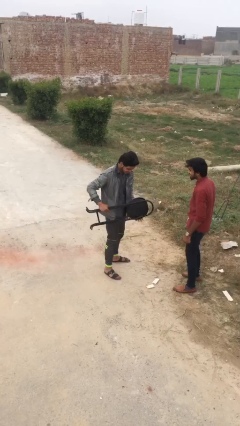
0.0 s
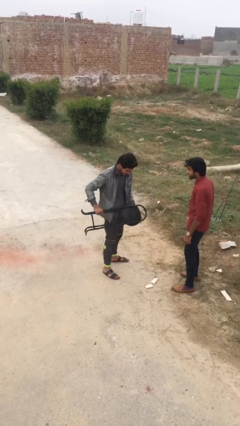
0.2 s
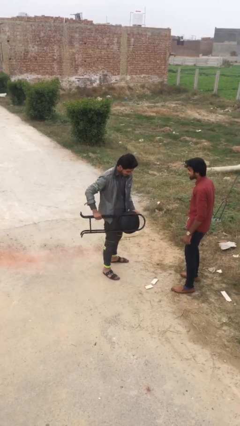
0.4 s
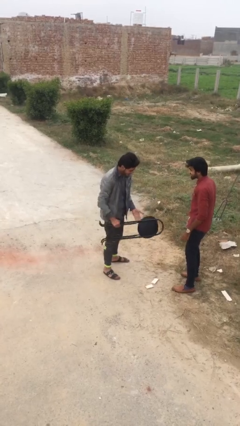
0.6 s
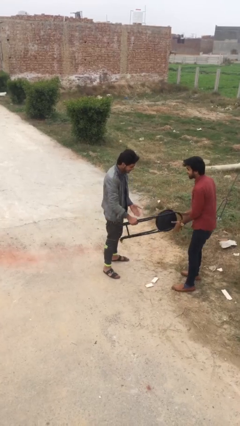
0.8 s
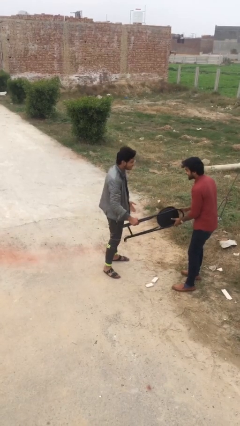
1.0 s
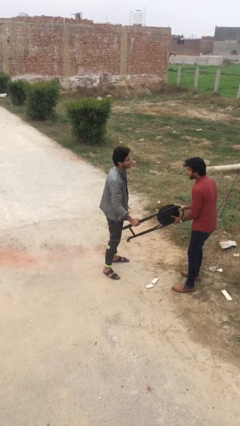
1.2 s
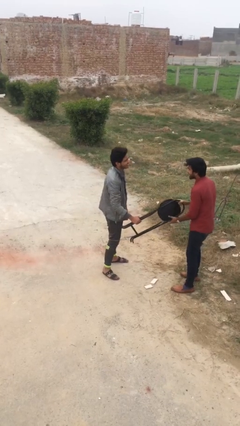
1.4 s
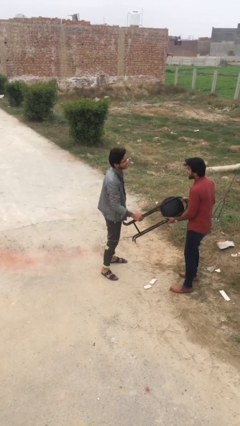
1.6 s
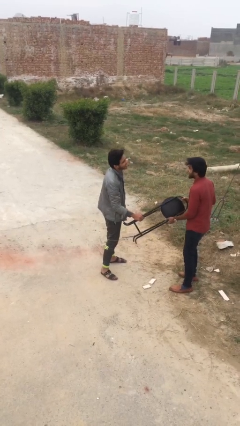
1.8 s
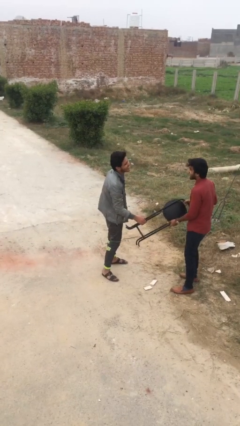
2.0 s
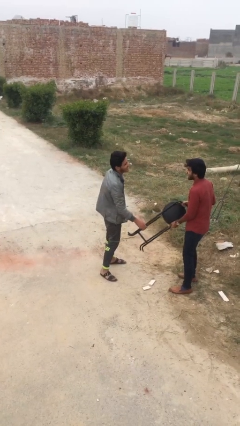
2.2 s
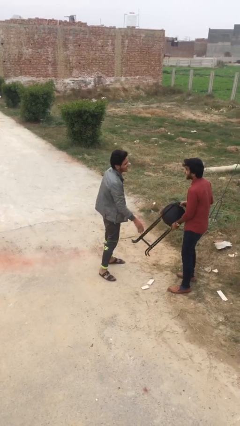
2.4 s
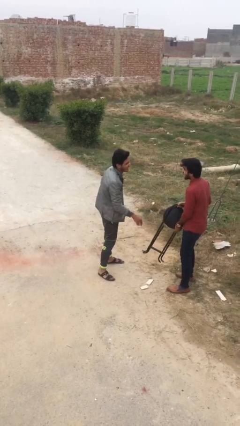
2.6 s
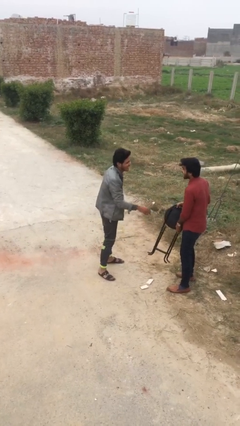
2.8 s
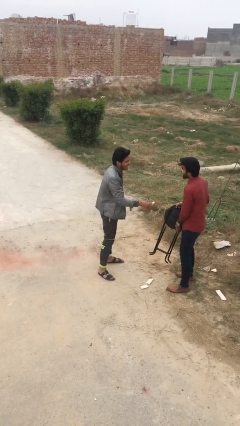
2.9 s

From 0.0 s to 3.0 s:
person transfers object to person

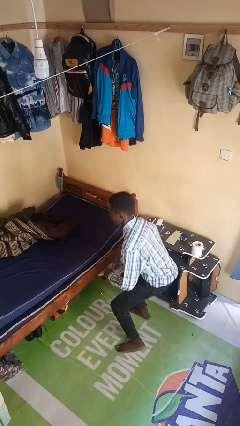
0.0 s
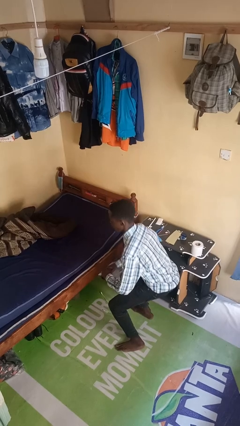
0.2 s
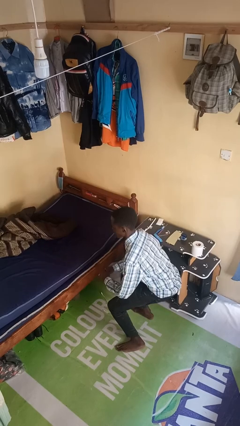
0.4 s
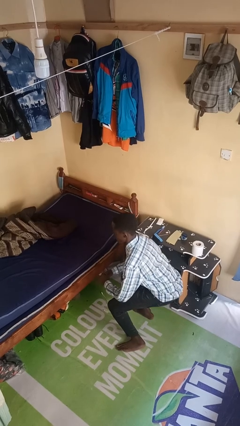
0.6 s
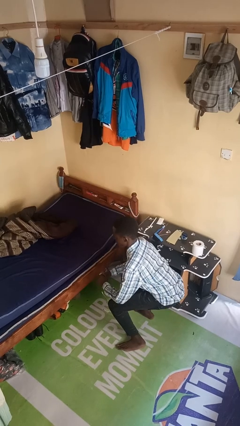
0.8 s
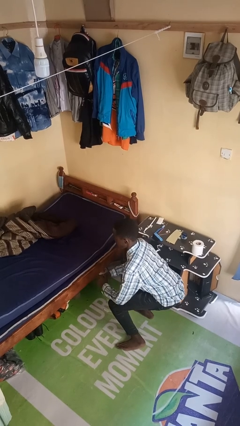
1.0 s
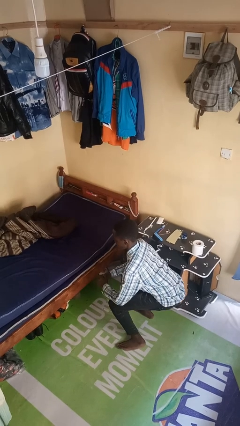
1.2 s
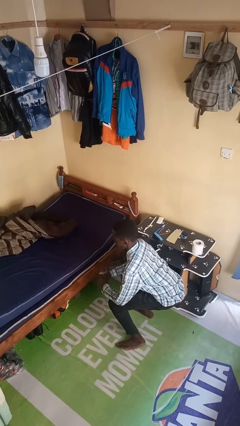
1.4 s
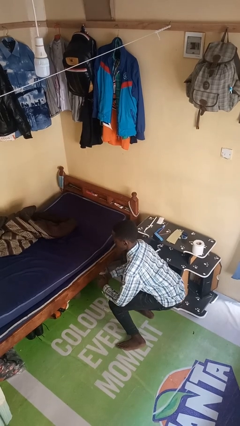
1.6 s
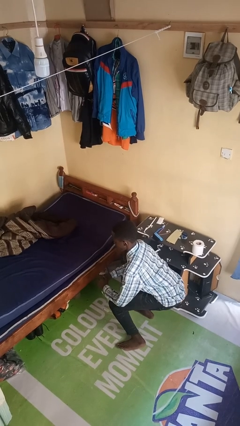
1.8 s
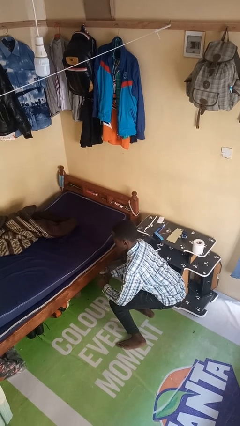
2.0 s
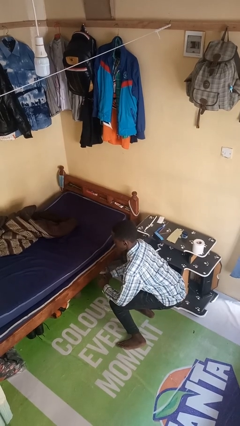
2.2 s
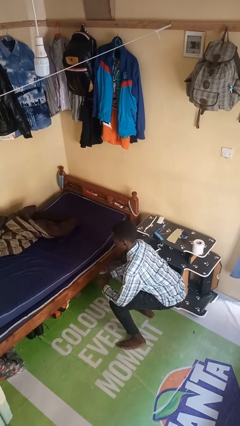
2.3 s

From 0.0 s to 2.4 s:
person squats

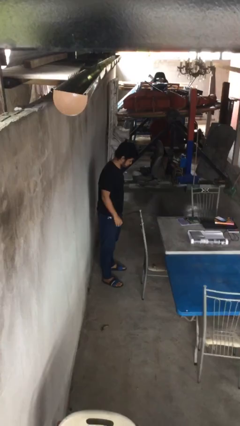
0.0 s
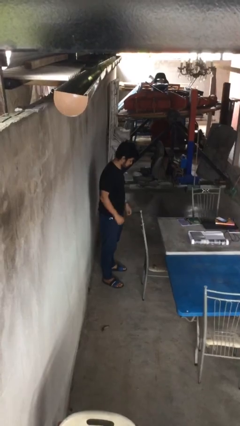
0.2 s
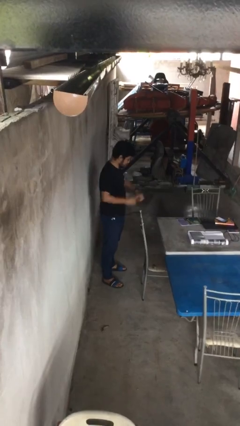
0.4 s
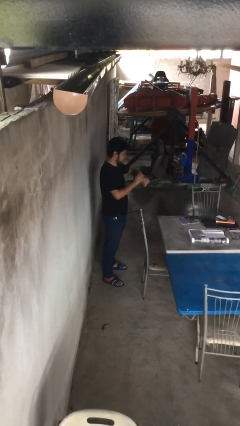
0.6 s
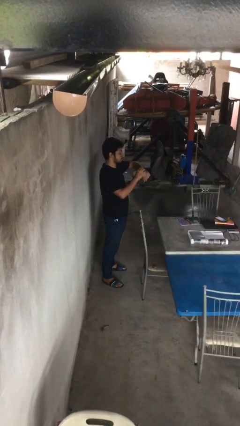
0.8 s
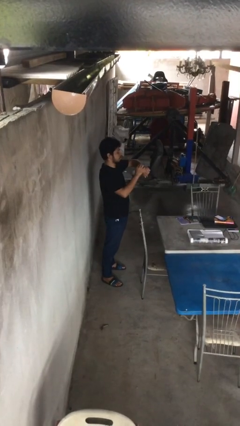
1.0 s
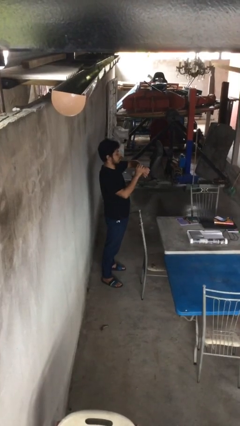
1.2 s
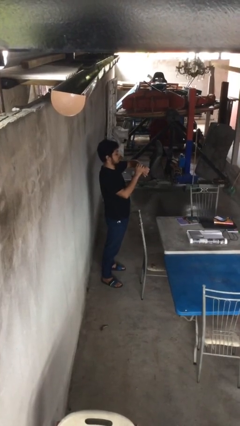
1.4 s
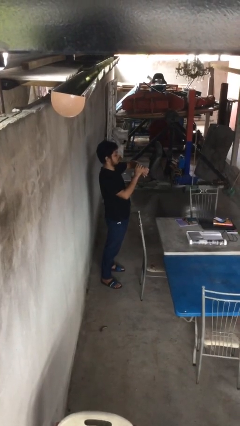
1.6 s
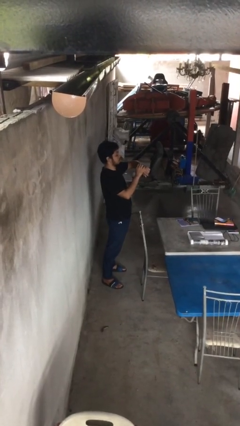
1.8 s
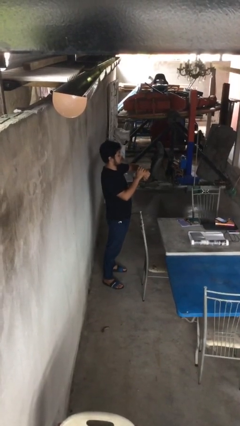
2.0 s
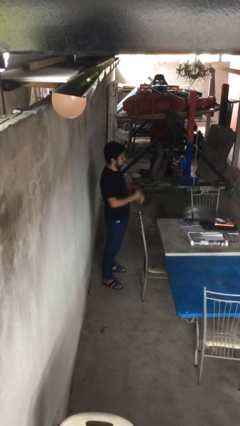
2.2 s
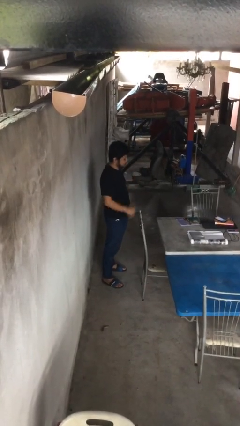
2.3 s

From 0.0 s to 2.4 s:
person looks at wristwatch

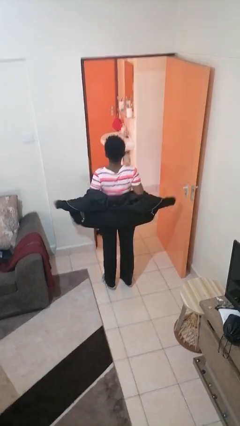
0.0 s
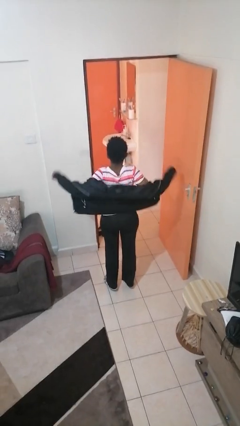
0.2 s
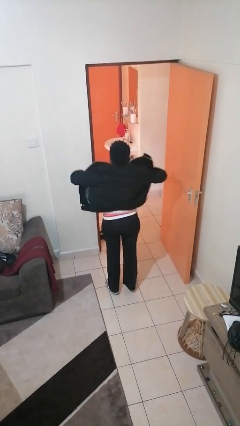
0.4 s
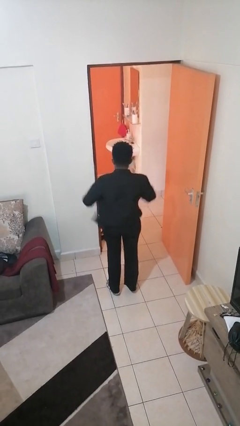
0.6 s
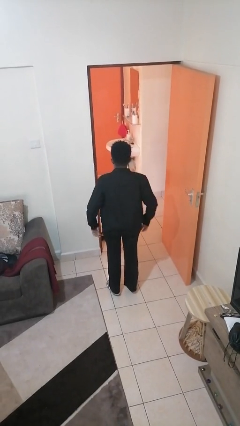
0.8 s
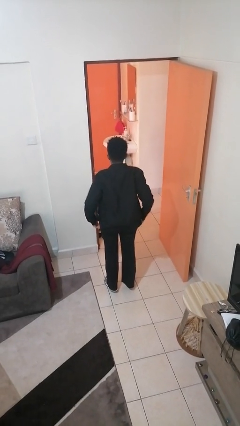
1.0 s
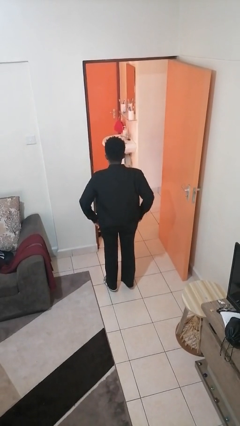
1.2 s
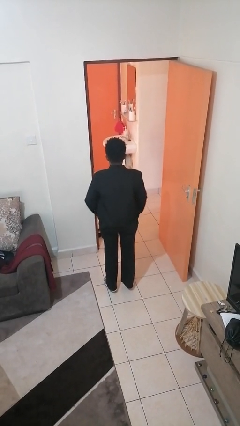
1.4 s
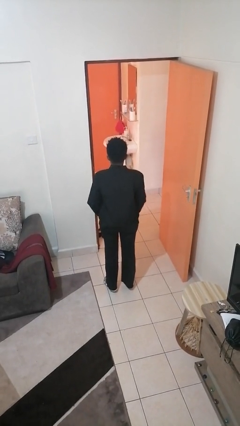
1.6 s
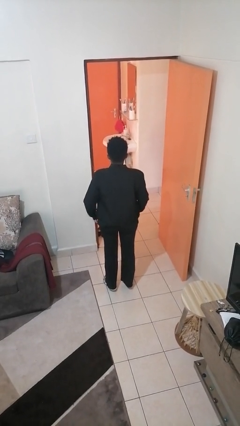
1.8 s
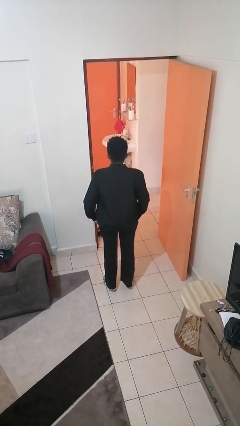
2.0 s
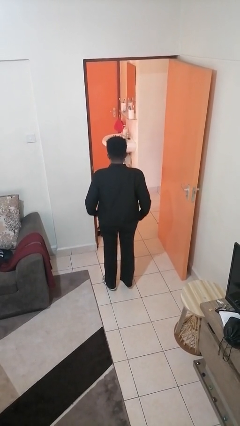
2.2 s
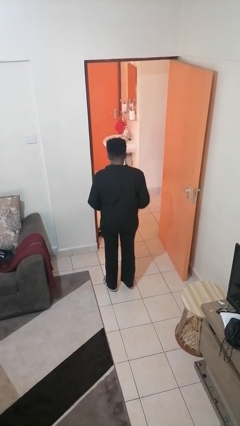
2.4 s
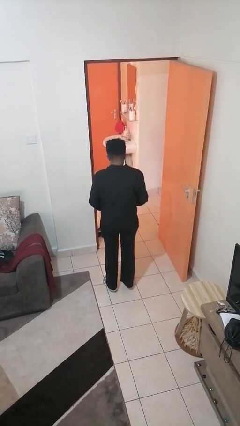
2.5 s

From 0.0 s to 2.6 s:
person puts on jacket

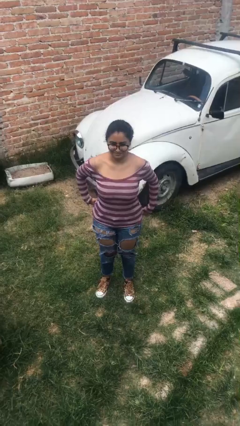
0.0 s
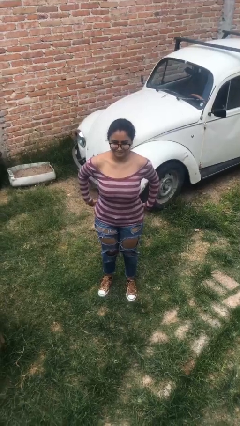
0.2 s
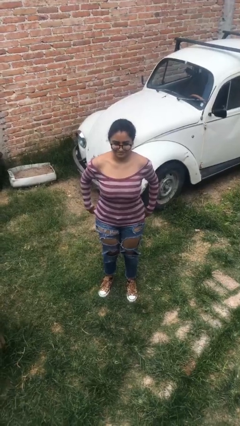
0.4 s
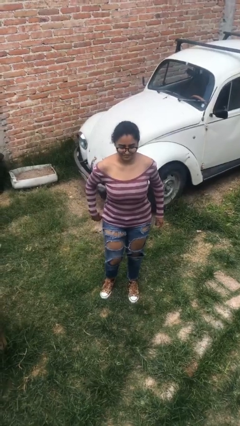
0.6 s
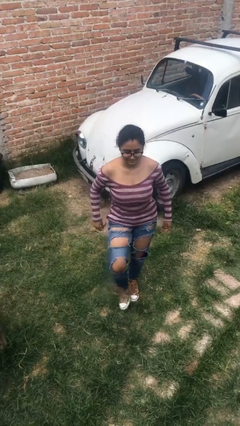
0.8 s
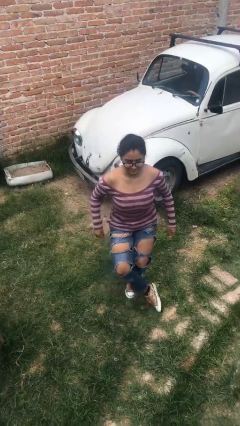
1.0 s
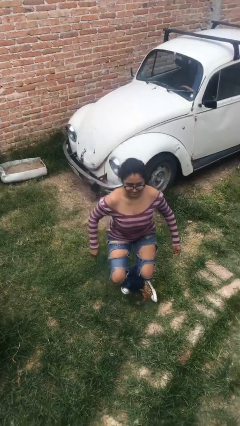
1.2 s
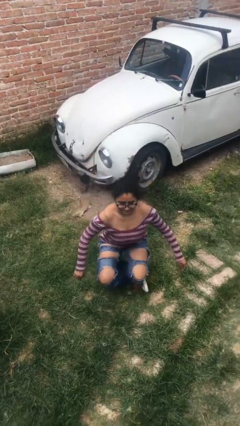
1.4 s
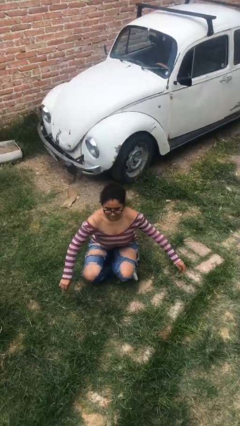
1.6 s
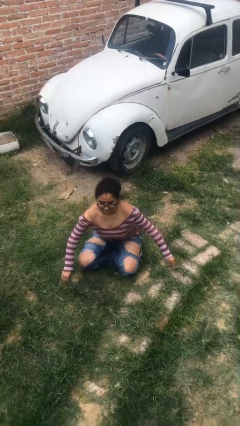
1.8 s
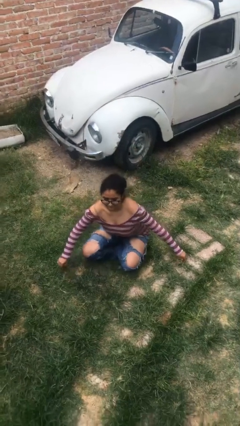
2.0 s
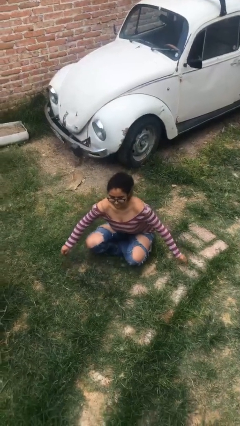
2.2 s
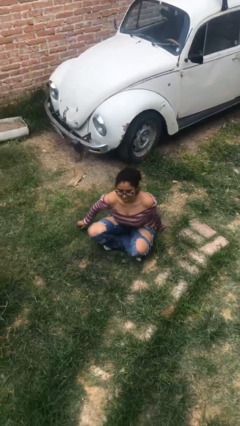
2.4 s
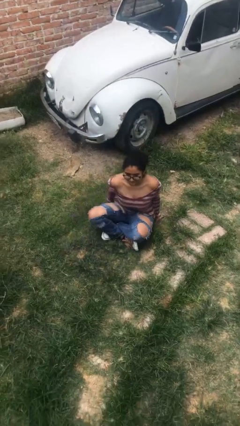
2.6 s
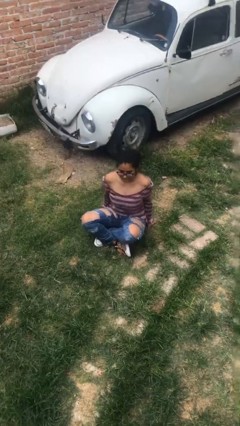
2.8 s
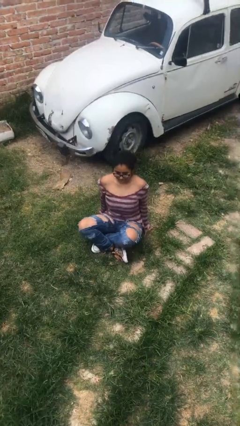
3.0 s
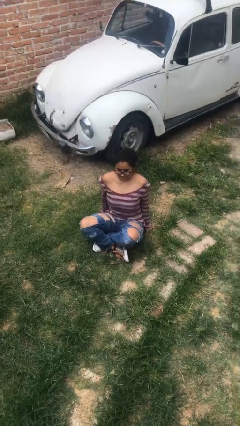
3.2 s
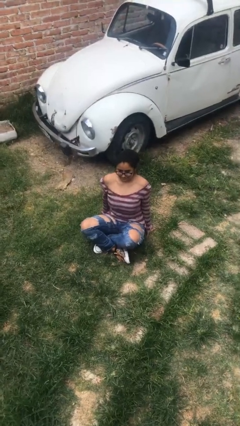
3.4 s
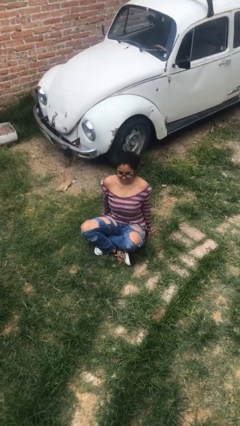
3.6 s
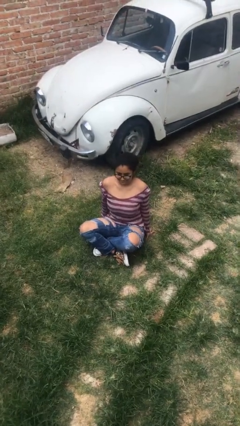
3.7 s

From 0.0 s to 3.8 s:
person sits crisscross

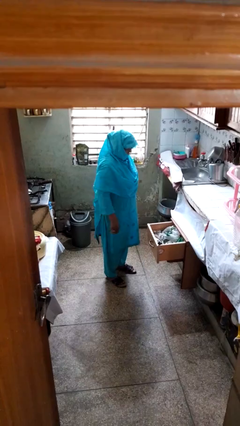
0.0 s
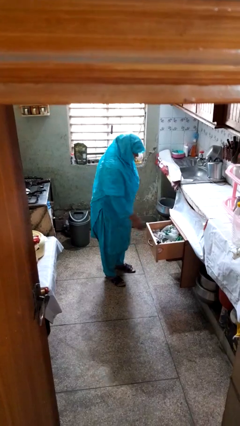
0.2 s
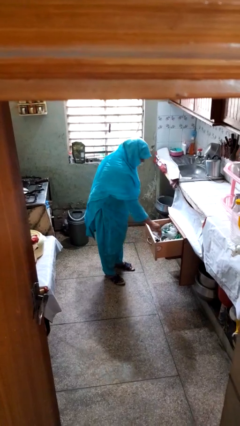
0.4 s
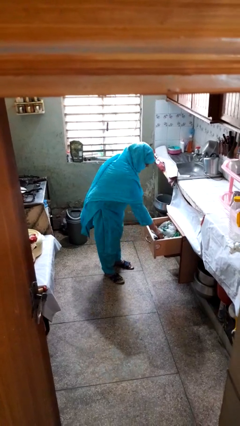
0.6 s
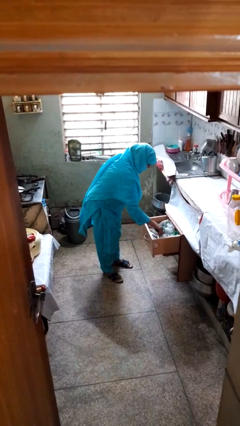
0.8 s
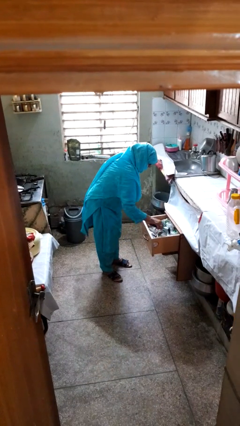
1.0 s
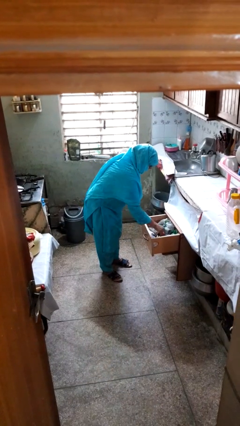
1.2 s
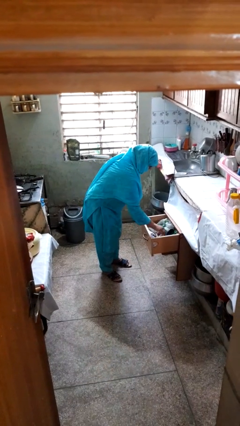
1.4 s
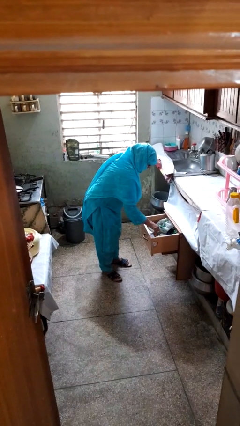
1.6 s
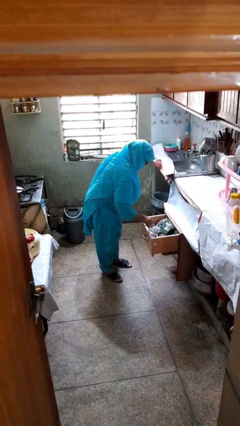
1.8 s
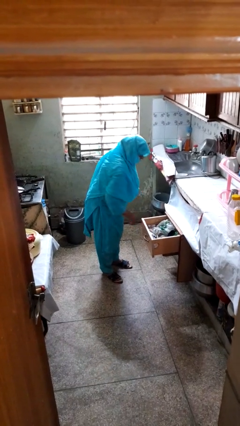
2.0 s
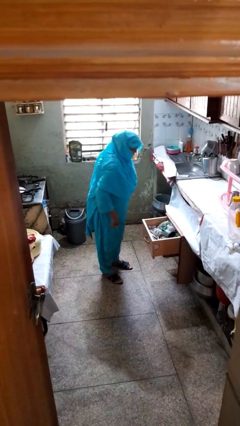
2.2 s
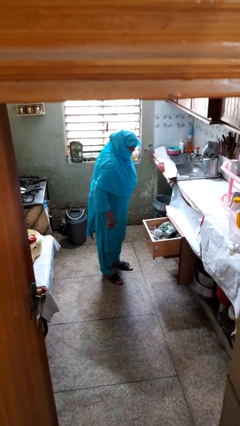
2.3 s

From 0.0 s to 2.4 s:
person searches in kitchen drawer

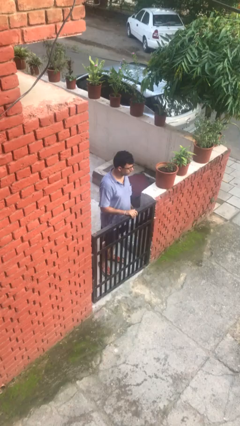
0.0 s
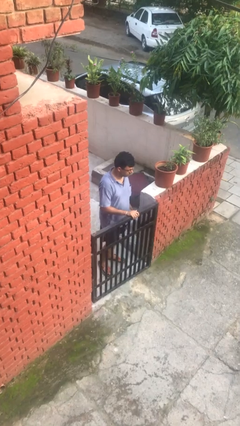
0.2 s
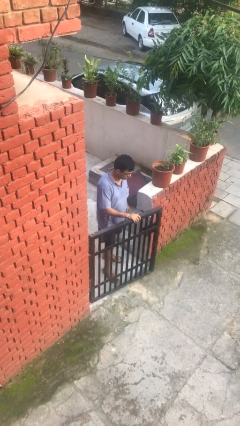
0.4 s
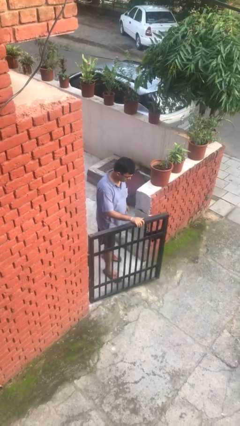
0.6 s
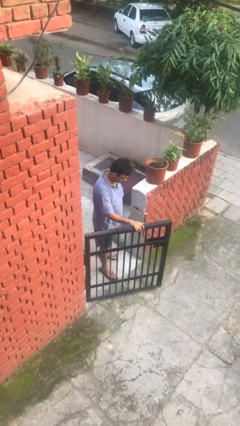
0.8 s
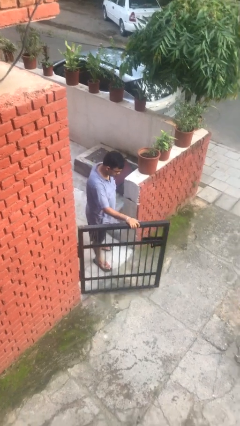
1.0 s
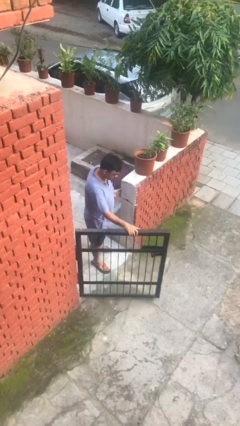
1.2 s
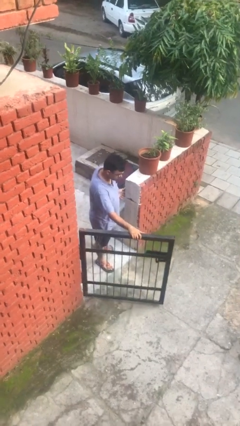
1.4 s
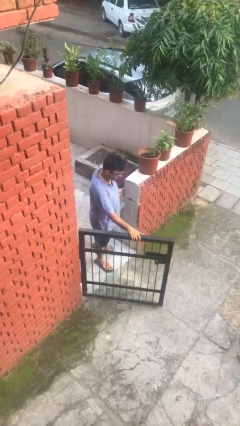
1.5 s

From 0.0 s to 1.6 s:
person opens gate
